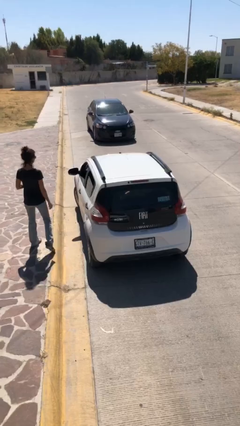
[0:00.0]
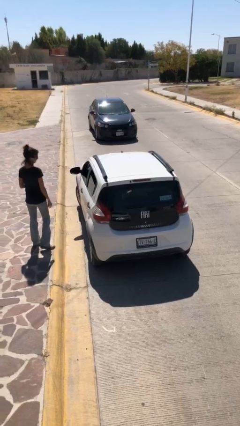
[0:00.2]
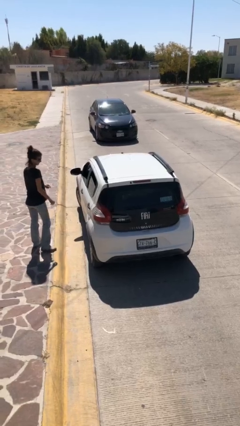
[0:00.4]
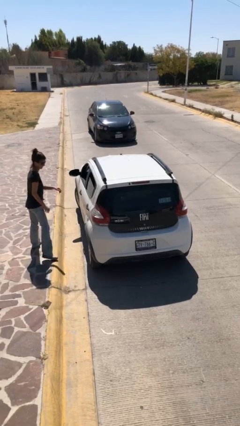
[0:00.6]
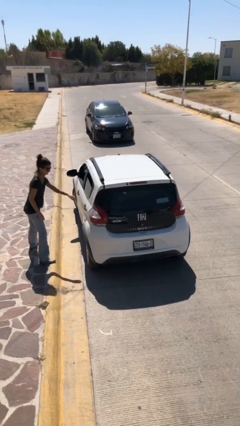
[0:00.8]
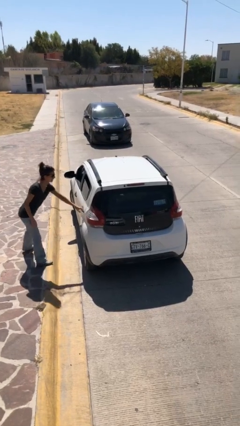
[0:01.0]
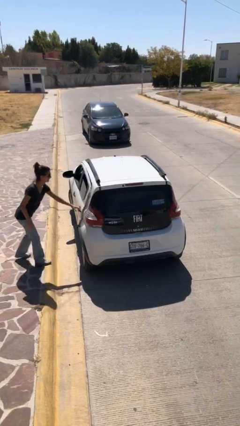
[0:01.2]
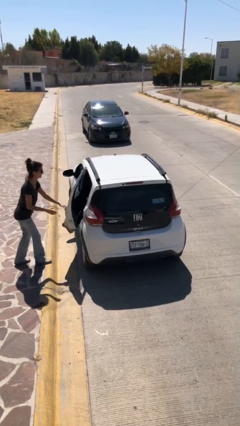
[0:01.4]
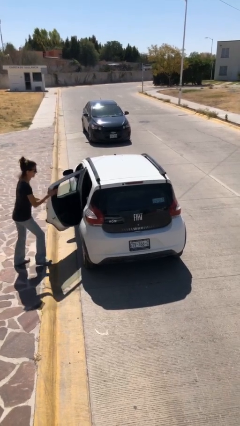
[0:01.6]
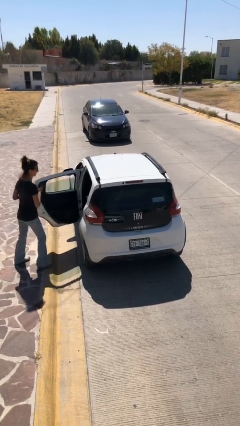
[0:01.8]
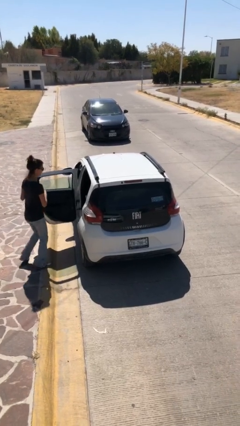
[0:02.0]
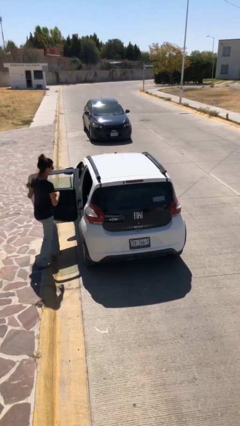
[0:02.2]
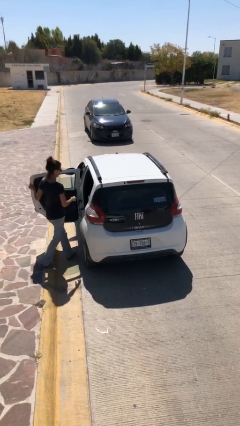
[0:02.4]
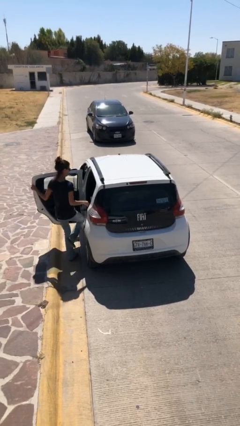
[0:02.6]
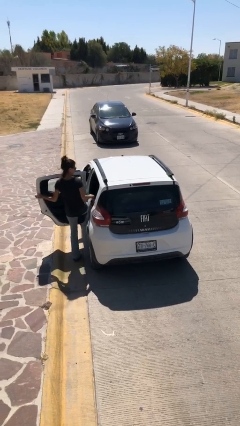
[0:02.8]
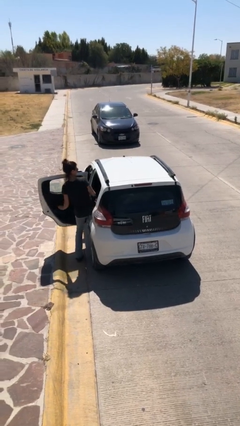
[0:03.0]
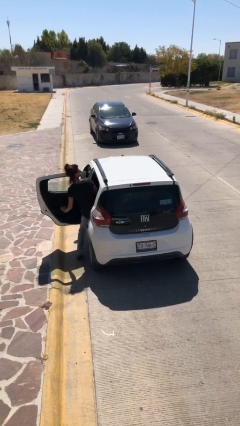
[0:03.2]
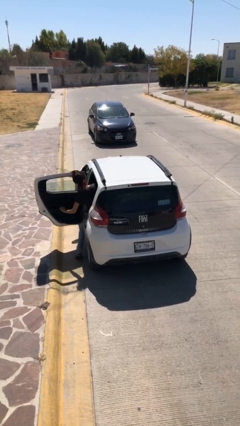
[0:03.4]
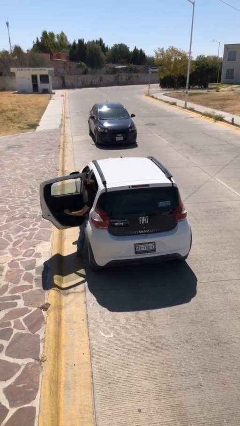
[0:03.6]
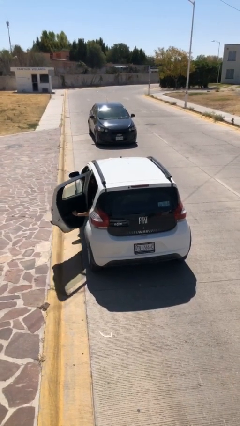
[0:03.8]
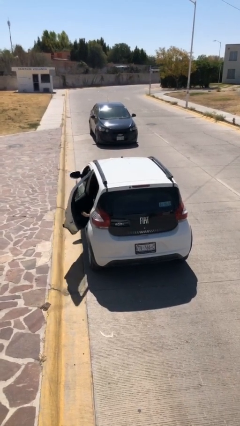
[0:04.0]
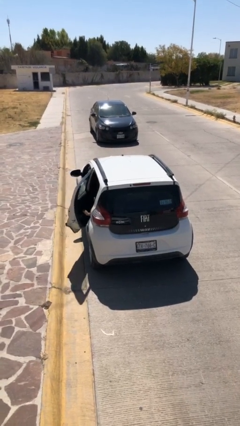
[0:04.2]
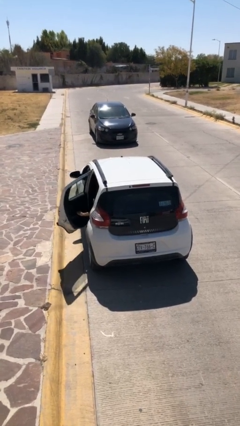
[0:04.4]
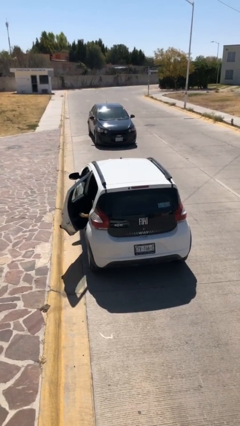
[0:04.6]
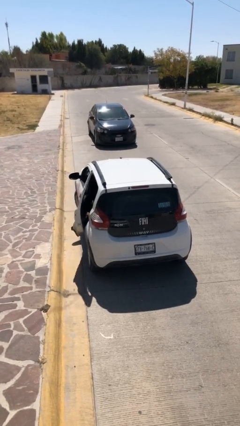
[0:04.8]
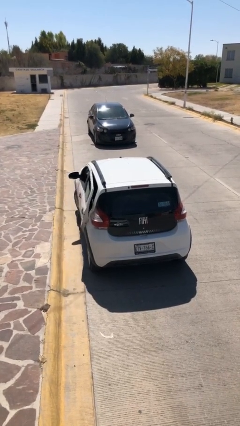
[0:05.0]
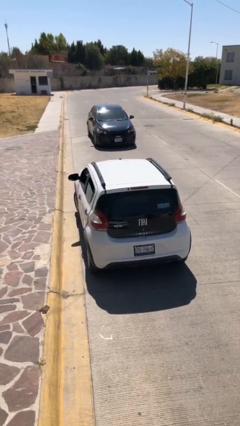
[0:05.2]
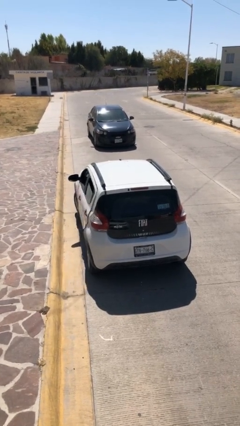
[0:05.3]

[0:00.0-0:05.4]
car picks up person

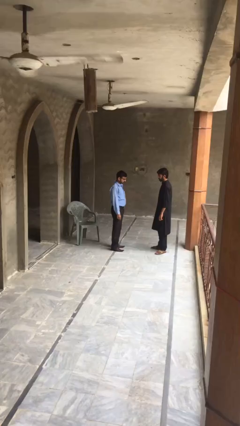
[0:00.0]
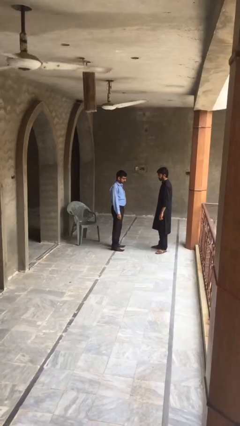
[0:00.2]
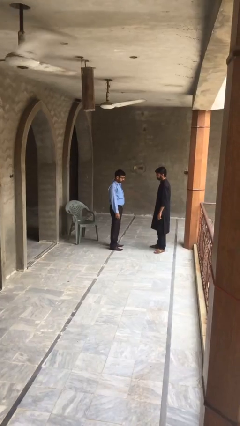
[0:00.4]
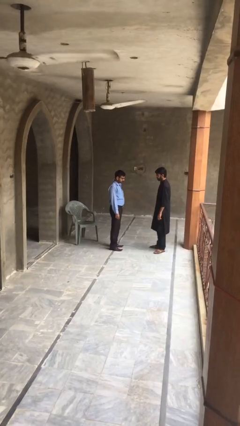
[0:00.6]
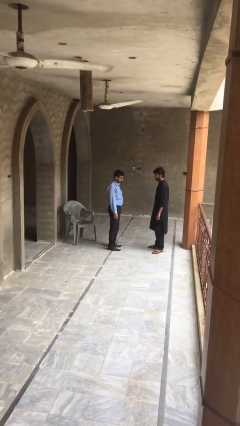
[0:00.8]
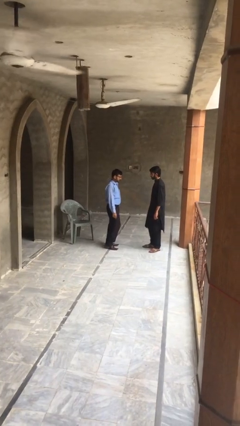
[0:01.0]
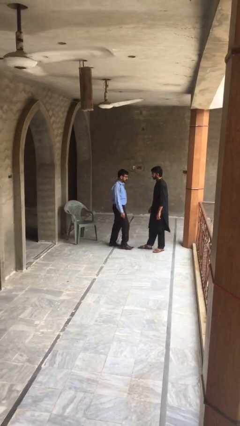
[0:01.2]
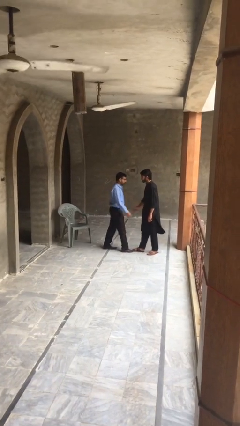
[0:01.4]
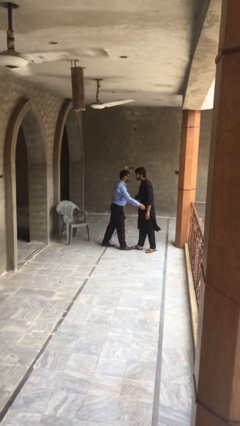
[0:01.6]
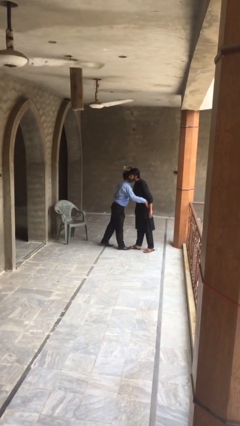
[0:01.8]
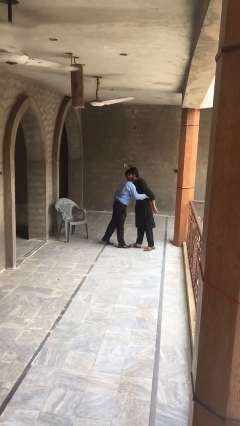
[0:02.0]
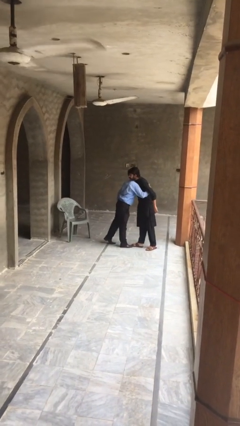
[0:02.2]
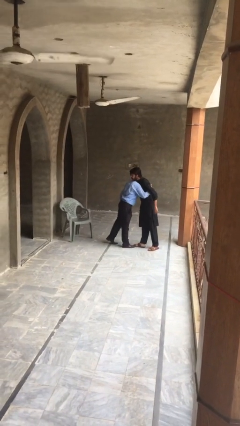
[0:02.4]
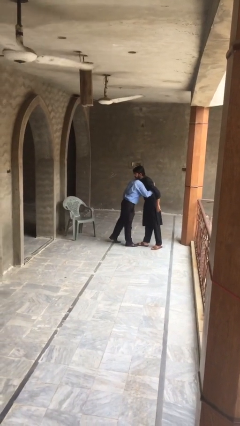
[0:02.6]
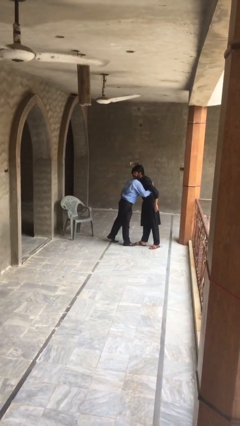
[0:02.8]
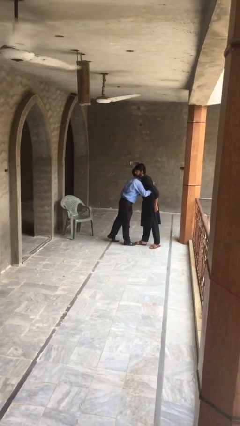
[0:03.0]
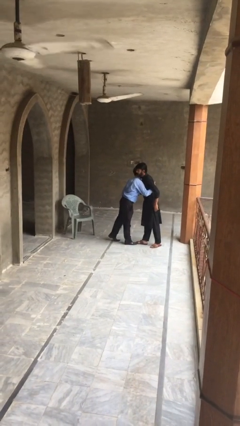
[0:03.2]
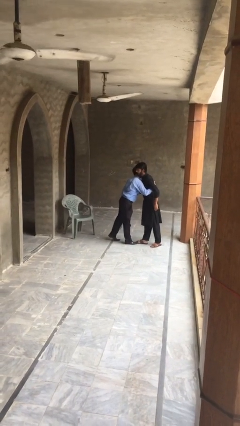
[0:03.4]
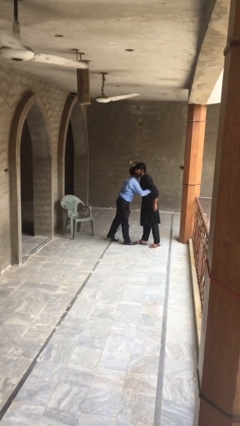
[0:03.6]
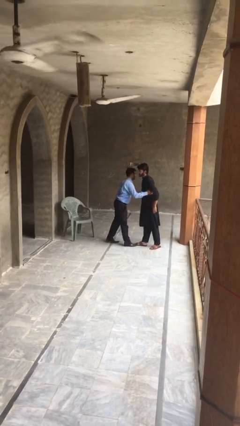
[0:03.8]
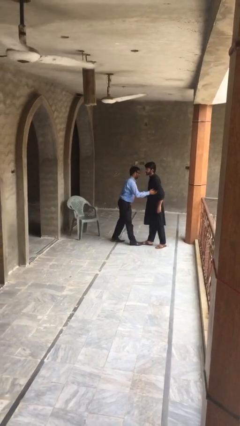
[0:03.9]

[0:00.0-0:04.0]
person embraces person

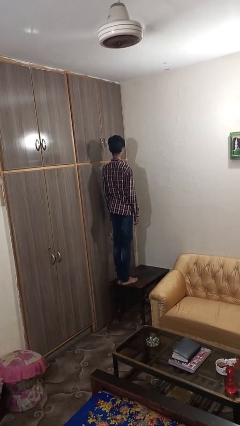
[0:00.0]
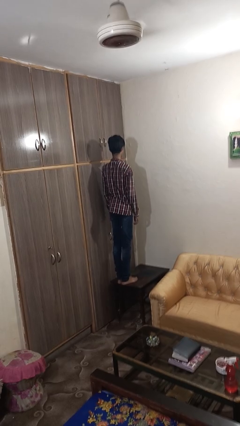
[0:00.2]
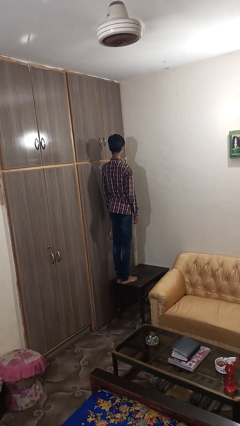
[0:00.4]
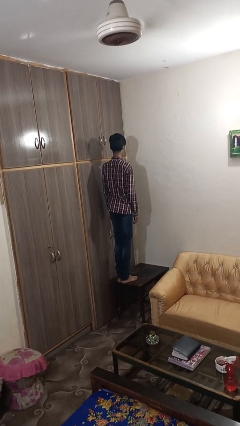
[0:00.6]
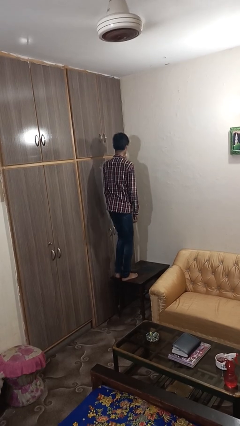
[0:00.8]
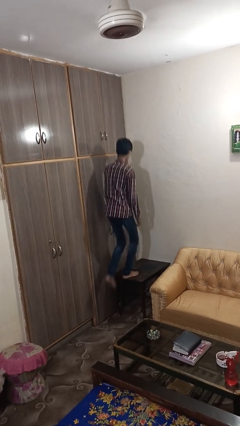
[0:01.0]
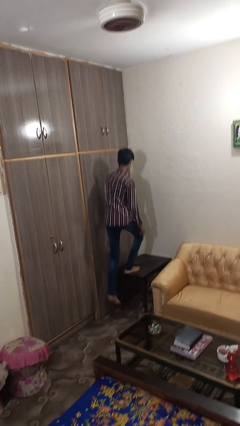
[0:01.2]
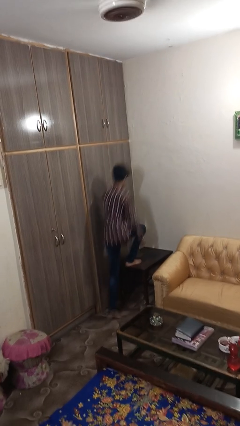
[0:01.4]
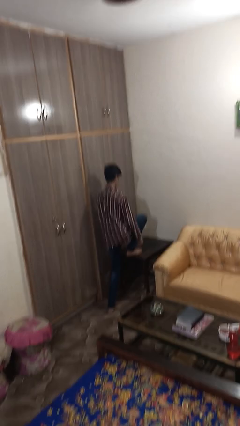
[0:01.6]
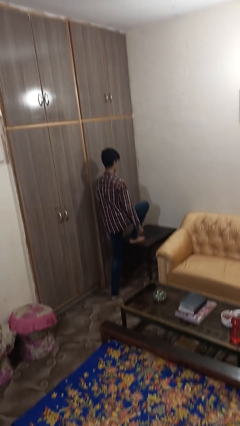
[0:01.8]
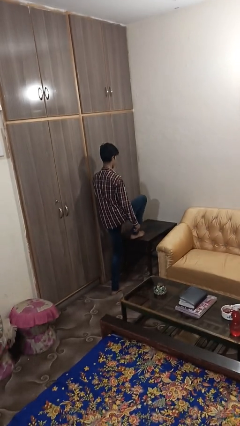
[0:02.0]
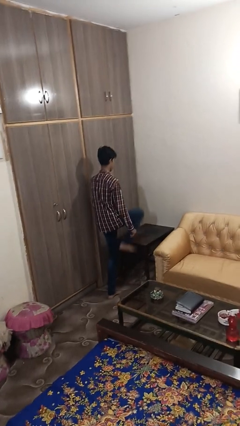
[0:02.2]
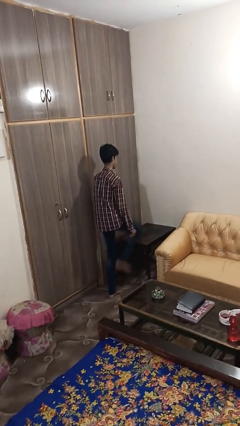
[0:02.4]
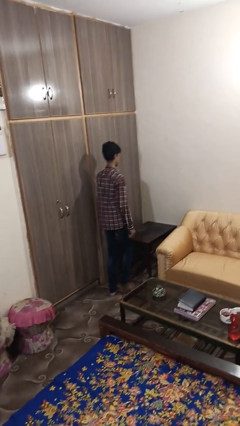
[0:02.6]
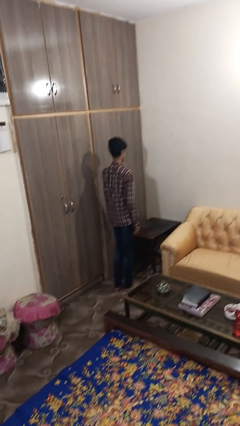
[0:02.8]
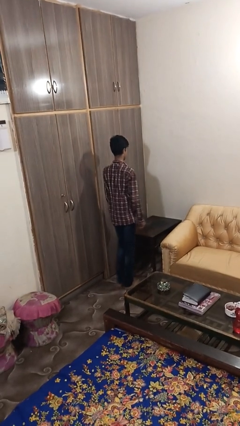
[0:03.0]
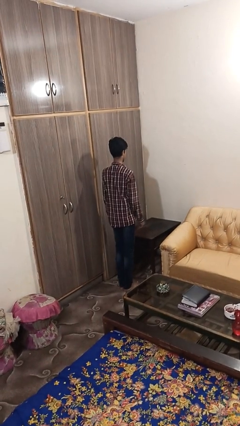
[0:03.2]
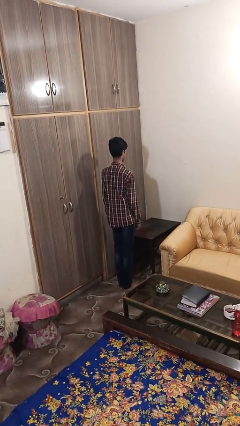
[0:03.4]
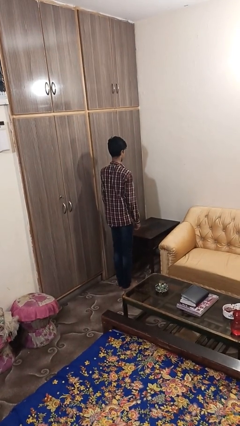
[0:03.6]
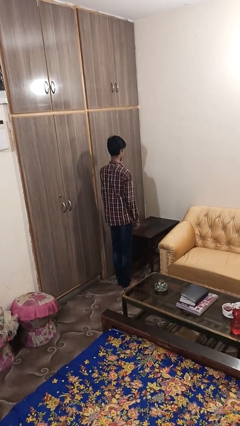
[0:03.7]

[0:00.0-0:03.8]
person climbs off table

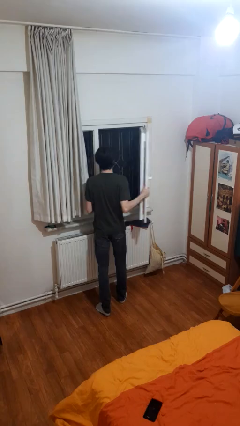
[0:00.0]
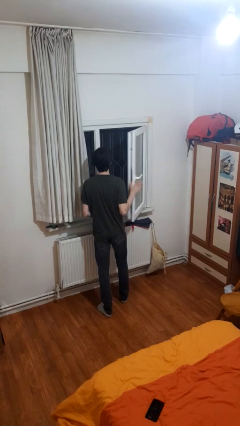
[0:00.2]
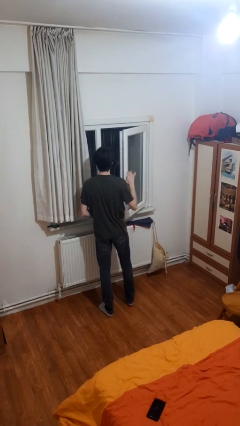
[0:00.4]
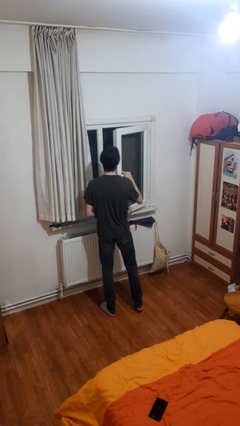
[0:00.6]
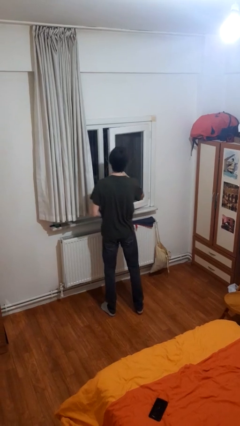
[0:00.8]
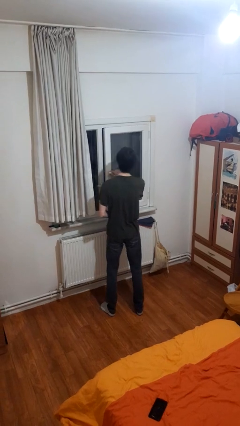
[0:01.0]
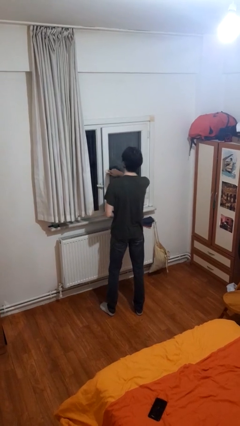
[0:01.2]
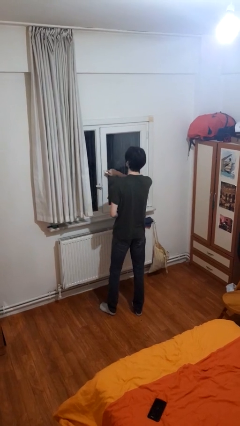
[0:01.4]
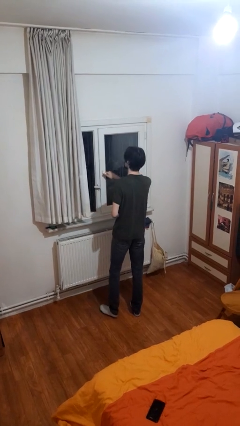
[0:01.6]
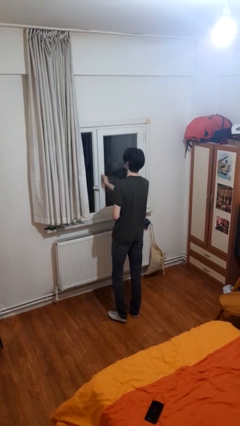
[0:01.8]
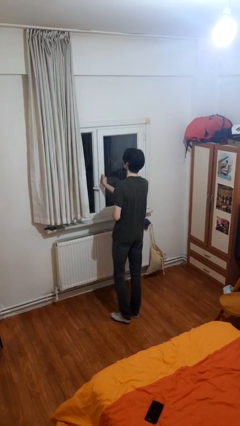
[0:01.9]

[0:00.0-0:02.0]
person closes home window

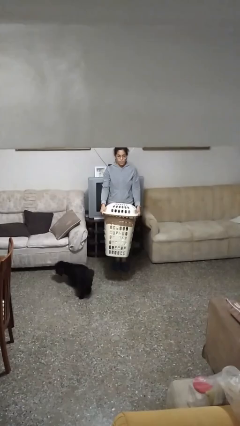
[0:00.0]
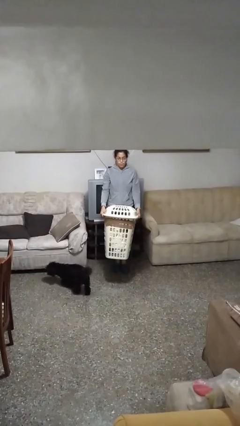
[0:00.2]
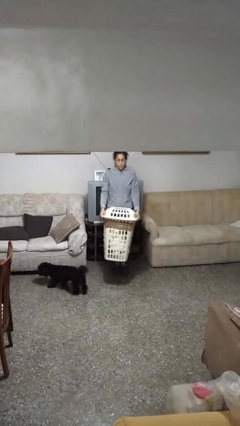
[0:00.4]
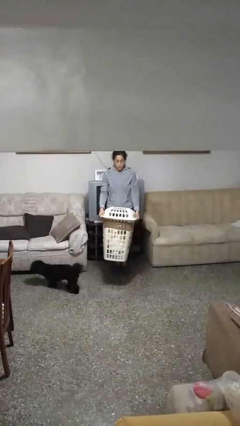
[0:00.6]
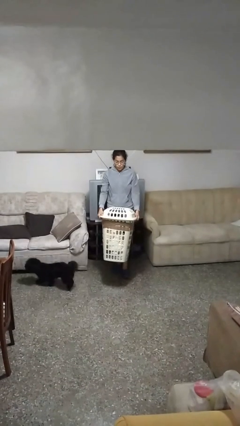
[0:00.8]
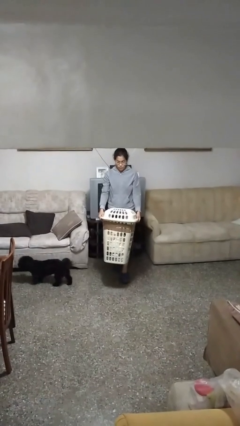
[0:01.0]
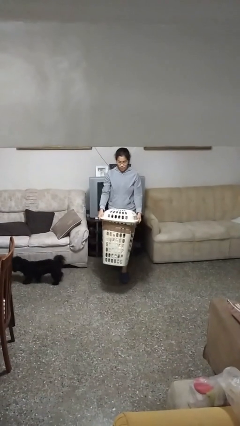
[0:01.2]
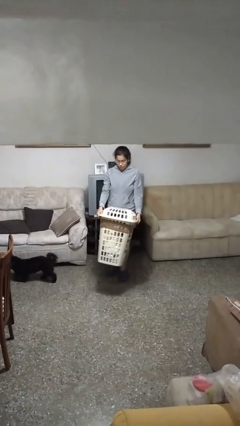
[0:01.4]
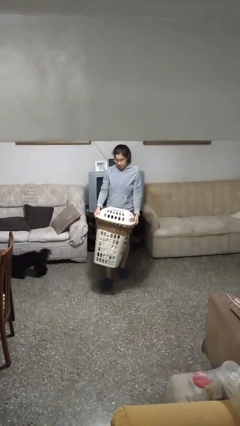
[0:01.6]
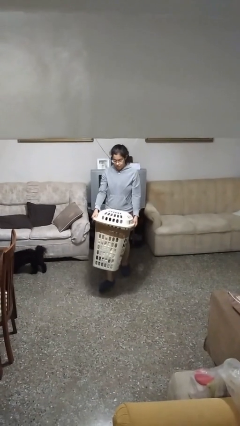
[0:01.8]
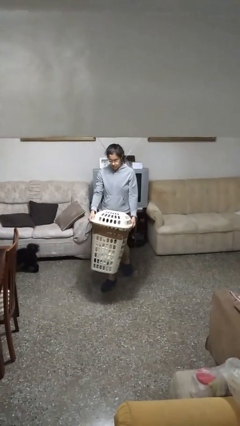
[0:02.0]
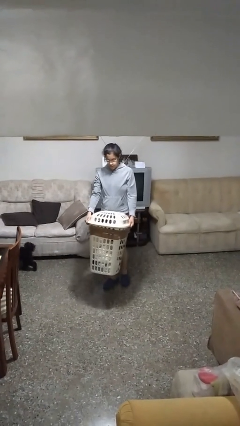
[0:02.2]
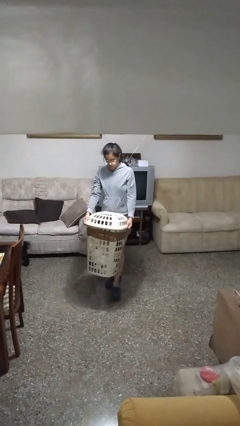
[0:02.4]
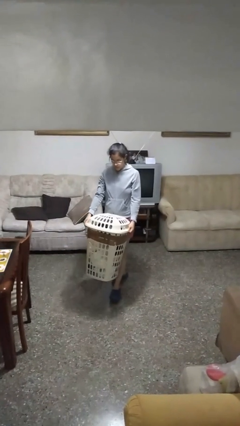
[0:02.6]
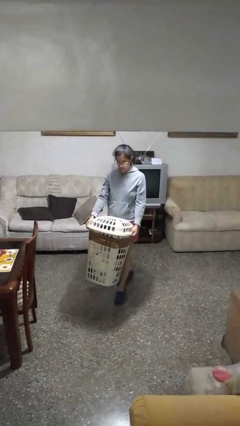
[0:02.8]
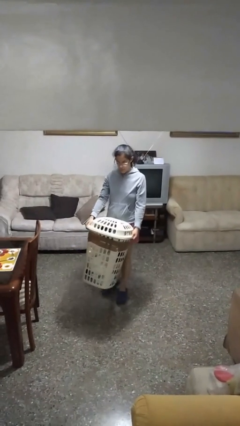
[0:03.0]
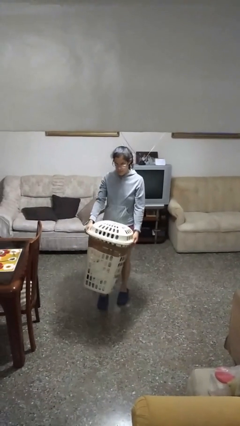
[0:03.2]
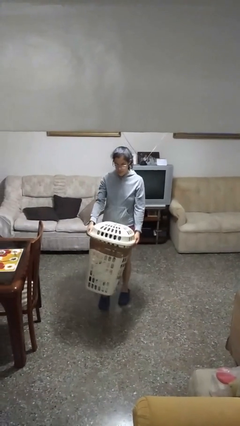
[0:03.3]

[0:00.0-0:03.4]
person carries laundry basket
